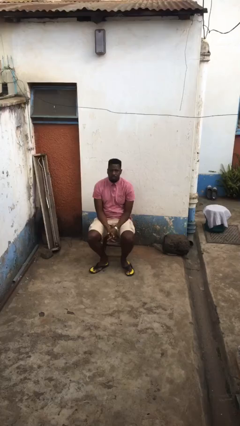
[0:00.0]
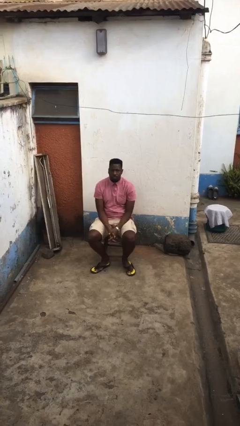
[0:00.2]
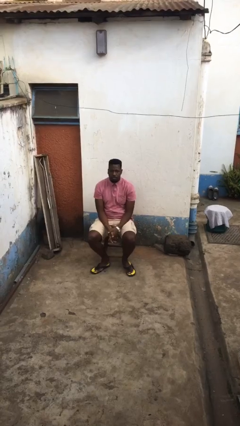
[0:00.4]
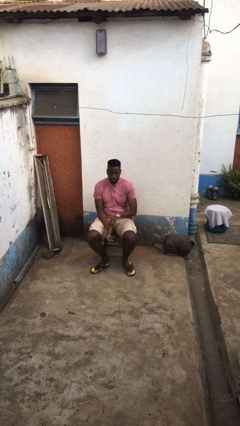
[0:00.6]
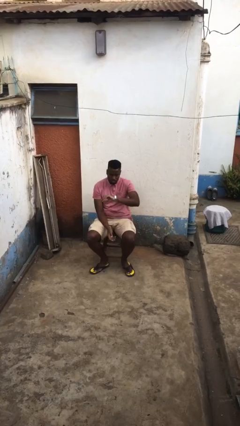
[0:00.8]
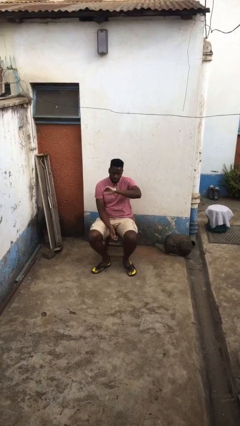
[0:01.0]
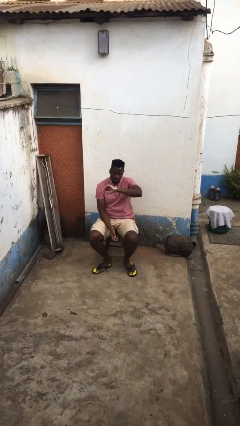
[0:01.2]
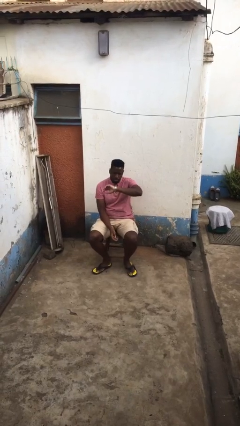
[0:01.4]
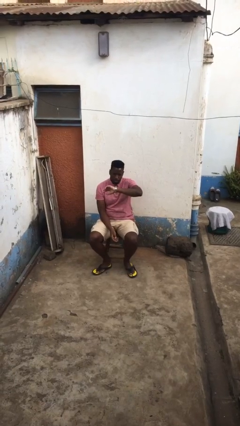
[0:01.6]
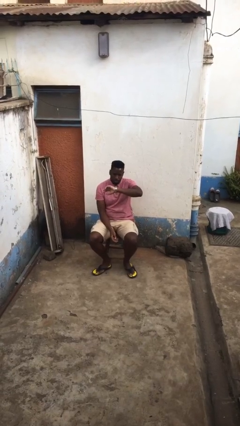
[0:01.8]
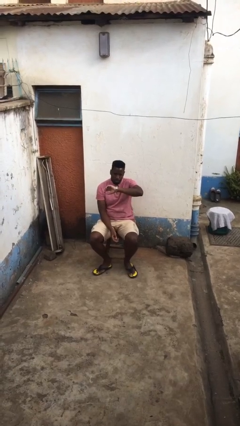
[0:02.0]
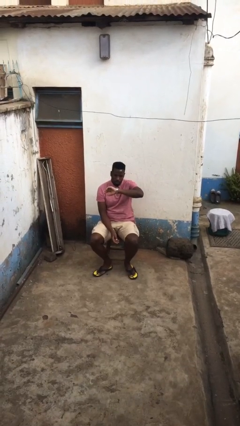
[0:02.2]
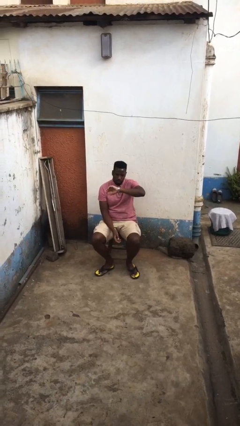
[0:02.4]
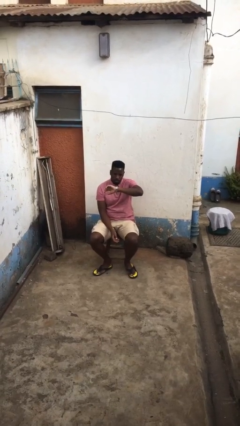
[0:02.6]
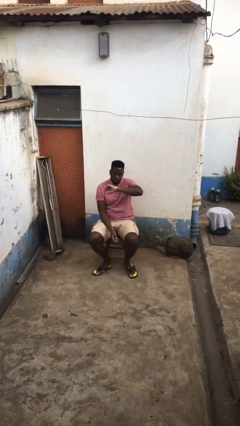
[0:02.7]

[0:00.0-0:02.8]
person looks at wristwatch

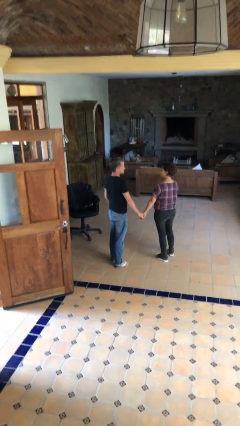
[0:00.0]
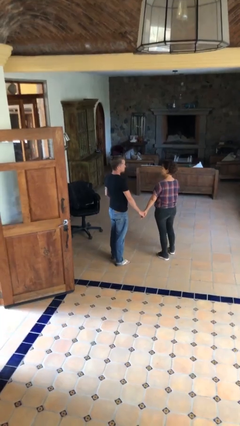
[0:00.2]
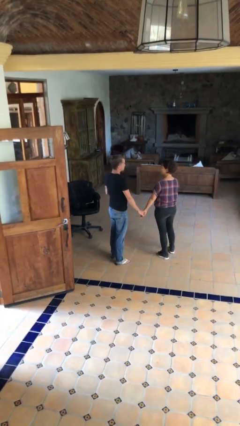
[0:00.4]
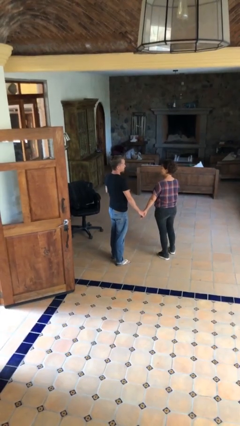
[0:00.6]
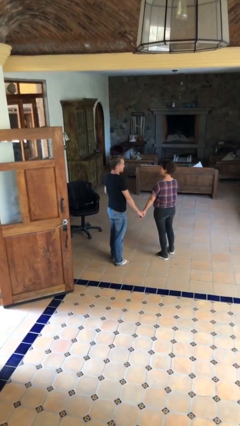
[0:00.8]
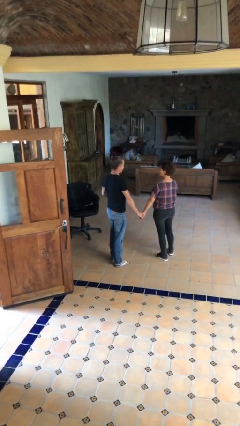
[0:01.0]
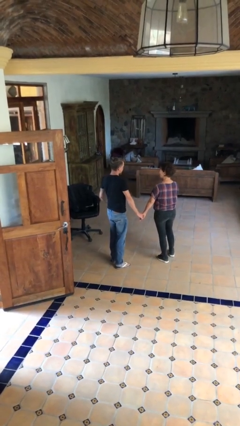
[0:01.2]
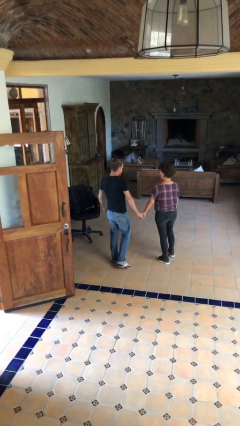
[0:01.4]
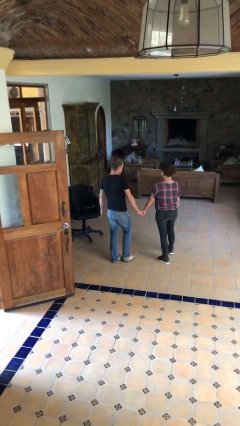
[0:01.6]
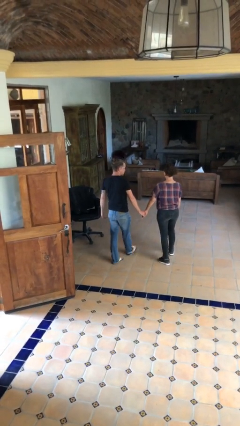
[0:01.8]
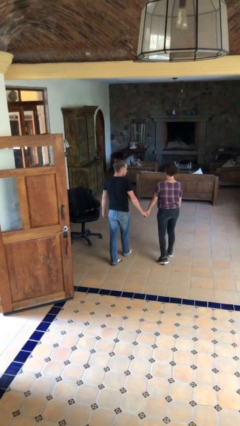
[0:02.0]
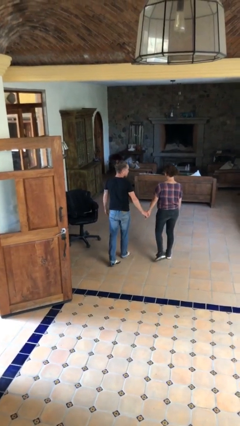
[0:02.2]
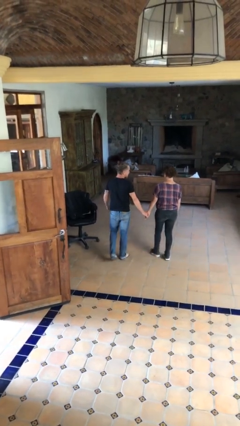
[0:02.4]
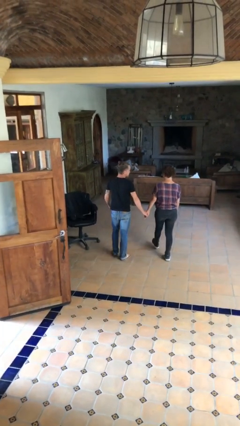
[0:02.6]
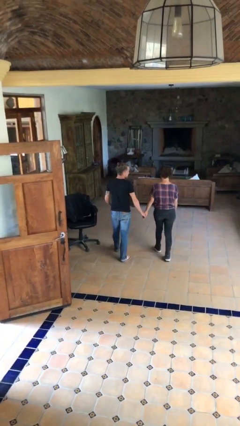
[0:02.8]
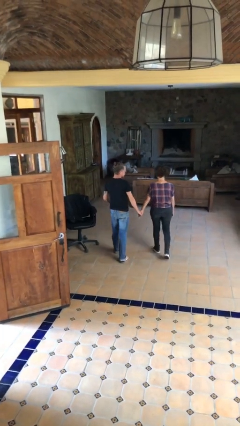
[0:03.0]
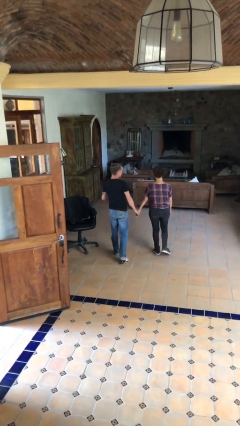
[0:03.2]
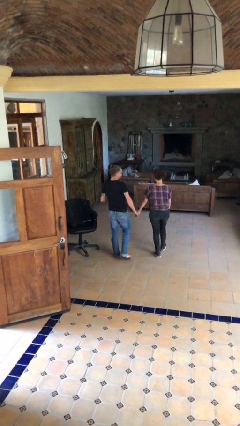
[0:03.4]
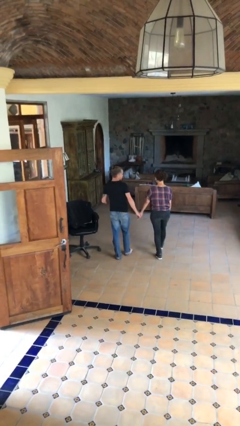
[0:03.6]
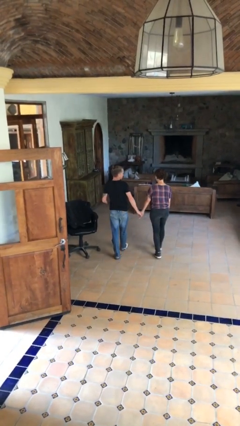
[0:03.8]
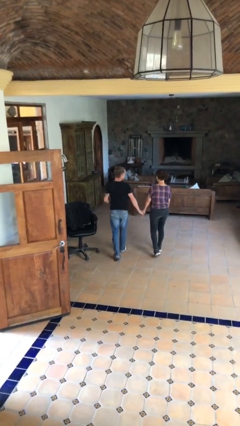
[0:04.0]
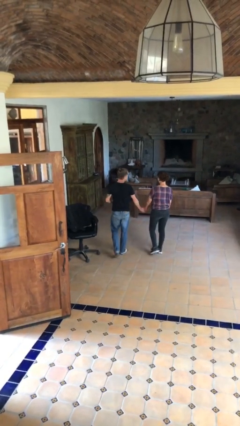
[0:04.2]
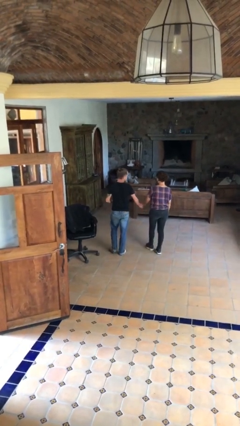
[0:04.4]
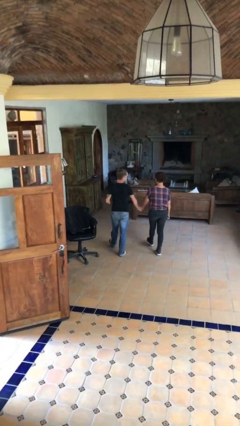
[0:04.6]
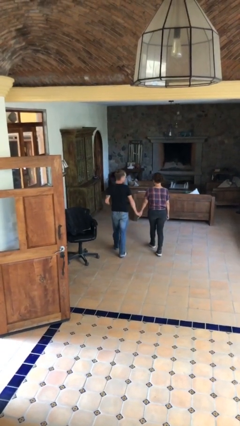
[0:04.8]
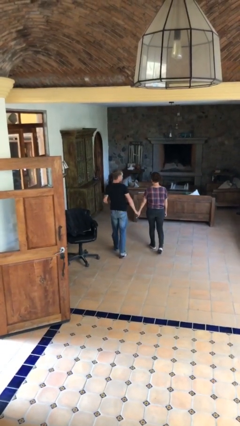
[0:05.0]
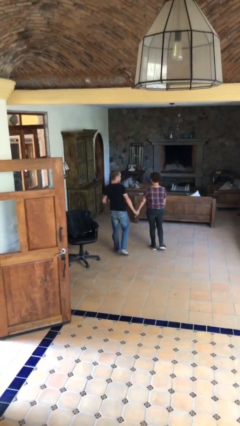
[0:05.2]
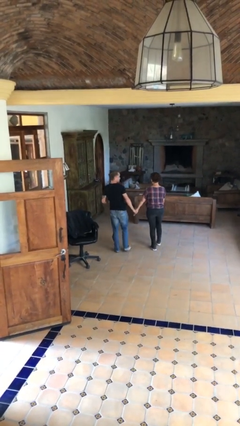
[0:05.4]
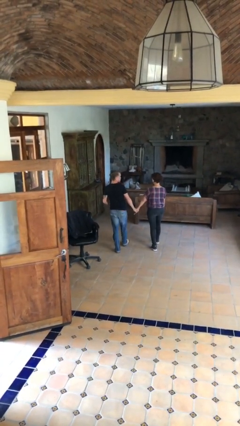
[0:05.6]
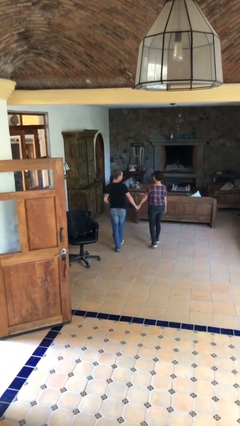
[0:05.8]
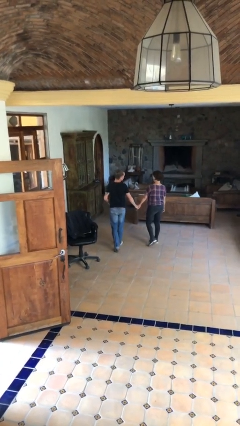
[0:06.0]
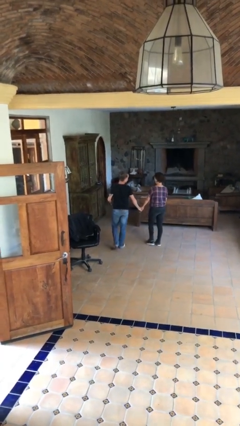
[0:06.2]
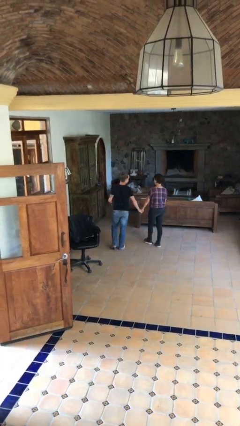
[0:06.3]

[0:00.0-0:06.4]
person holds hand

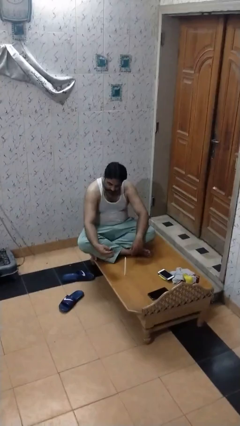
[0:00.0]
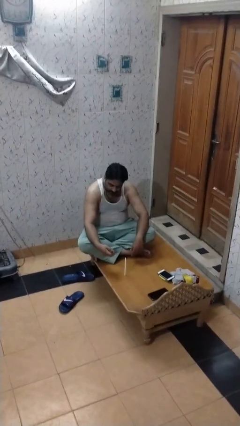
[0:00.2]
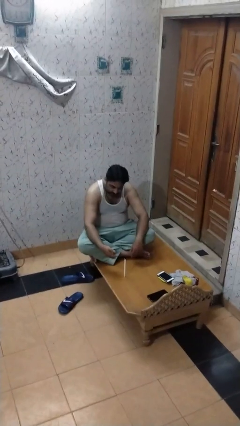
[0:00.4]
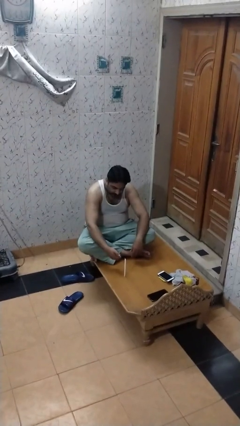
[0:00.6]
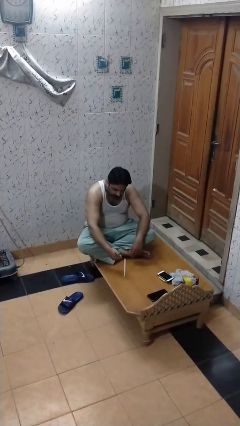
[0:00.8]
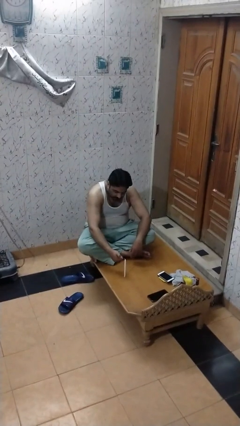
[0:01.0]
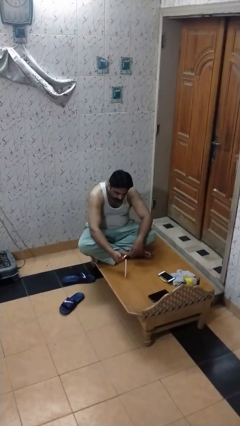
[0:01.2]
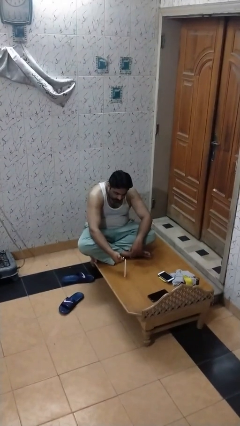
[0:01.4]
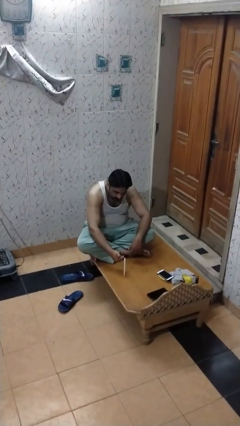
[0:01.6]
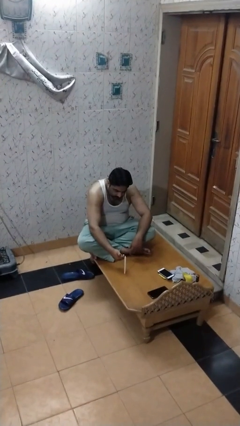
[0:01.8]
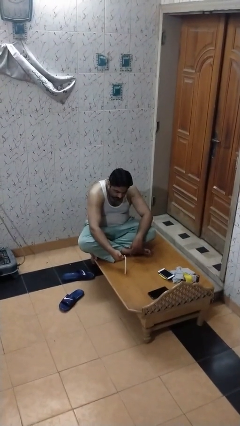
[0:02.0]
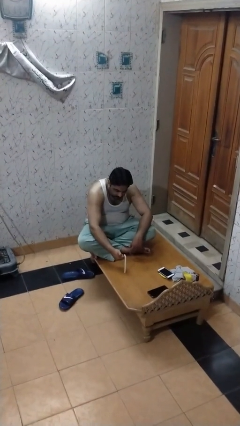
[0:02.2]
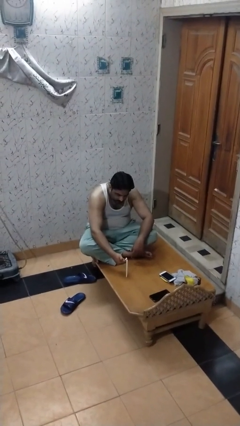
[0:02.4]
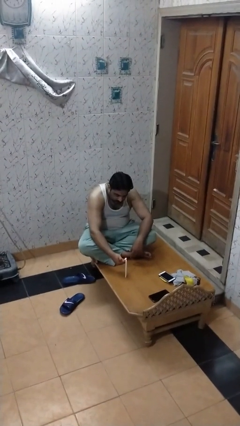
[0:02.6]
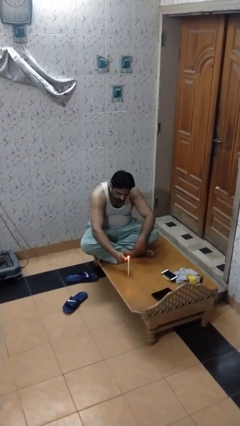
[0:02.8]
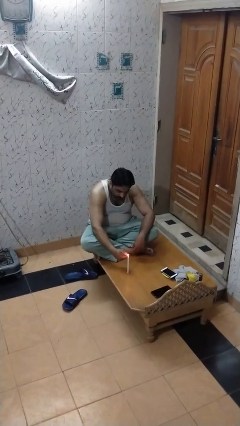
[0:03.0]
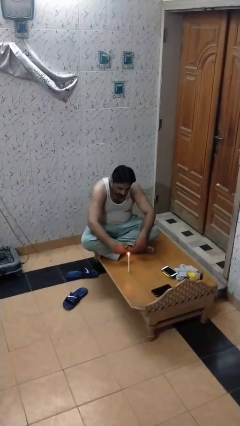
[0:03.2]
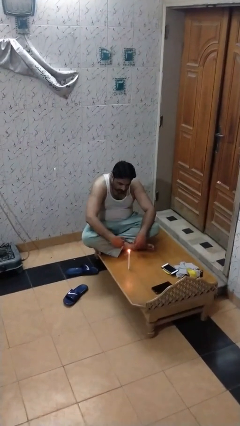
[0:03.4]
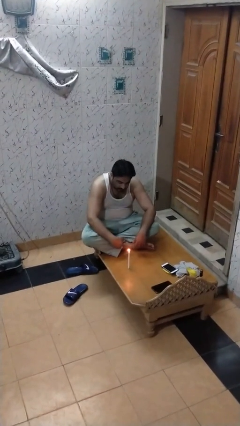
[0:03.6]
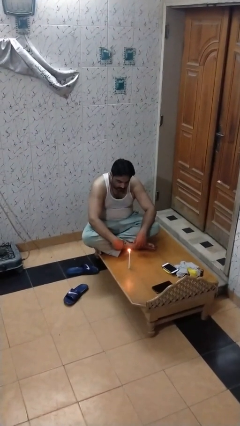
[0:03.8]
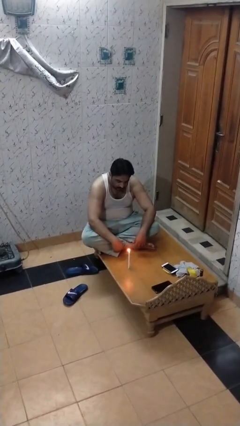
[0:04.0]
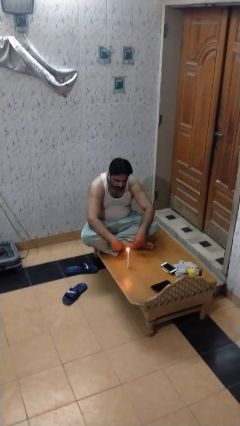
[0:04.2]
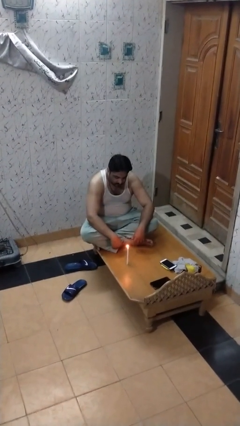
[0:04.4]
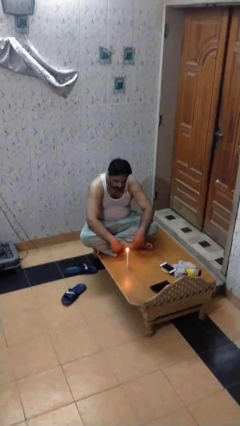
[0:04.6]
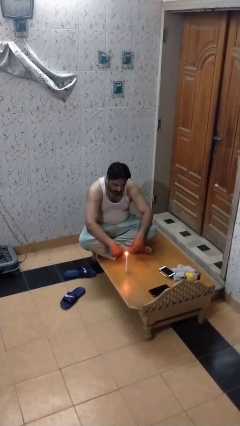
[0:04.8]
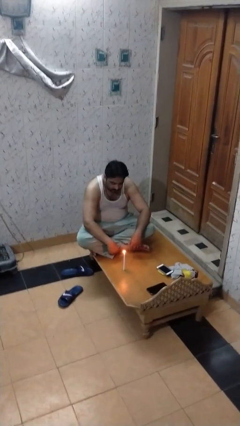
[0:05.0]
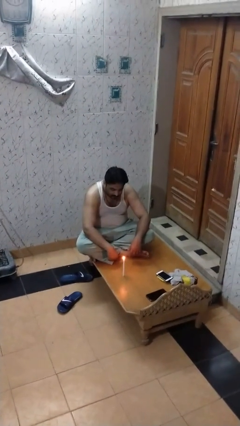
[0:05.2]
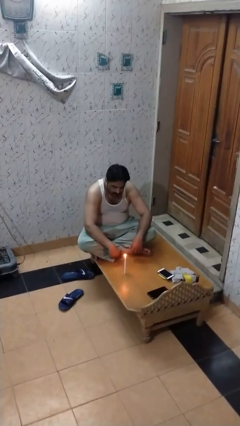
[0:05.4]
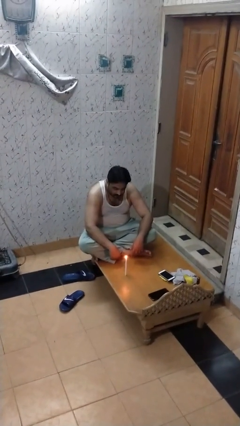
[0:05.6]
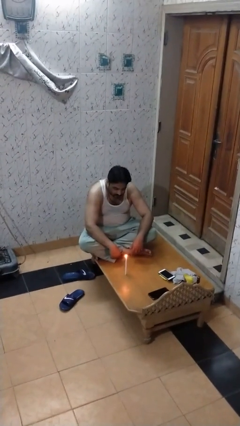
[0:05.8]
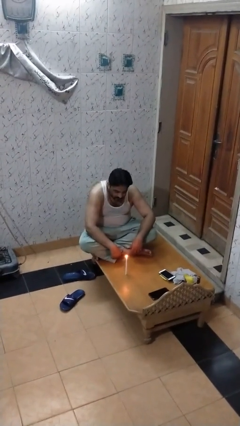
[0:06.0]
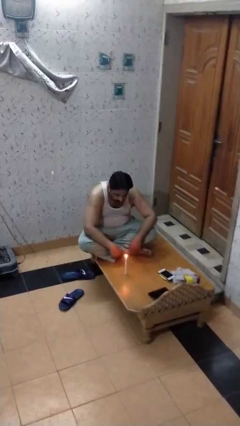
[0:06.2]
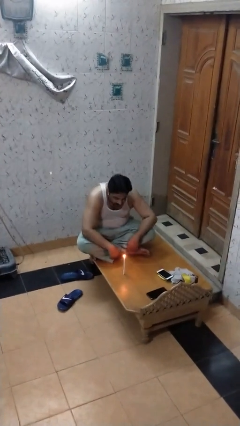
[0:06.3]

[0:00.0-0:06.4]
person lights candle

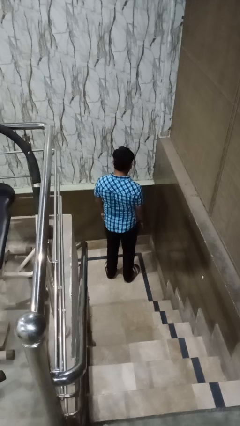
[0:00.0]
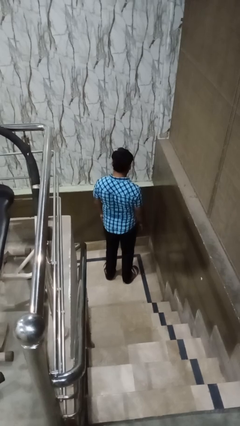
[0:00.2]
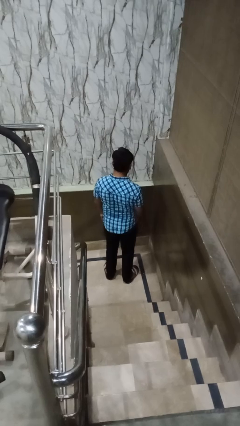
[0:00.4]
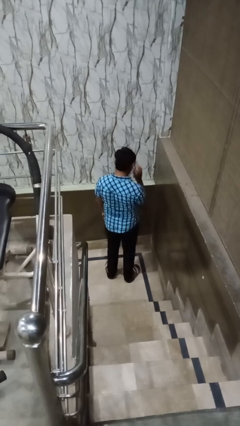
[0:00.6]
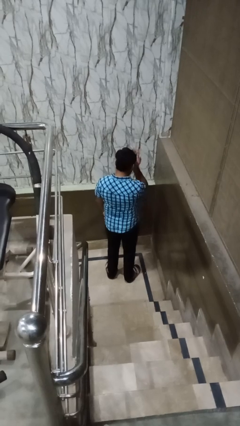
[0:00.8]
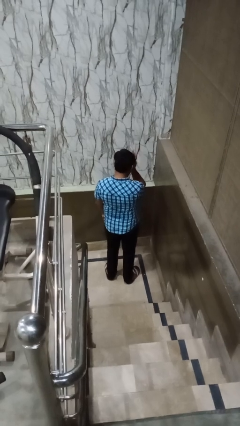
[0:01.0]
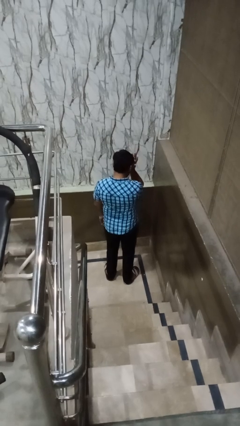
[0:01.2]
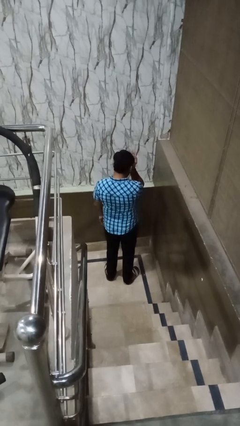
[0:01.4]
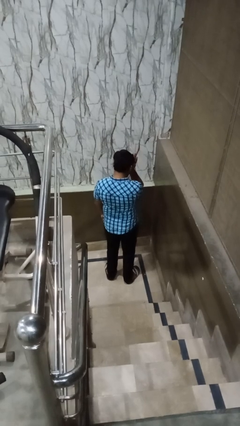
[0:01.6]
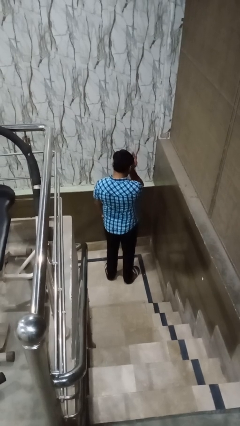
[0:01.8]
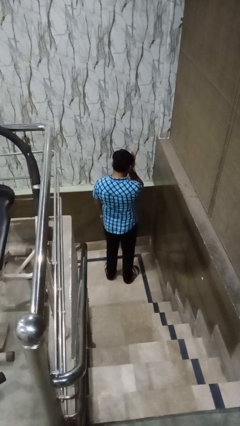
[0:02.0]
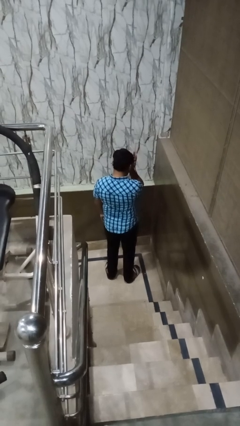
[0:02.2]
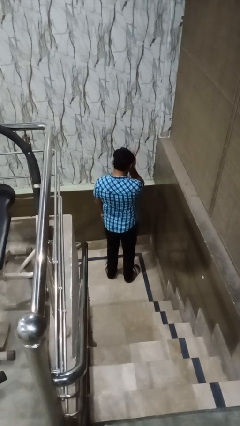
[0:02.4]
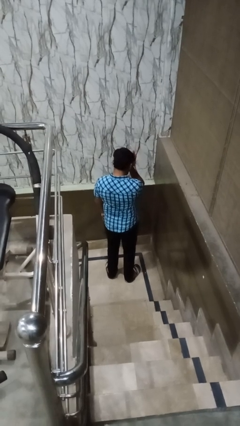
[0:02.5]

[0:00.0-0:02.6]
person shades eyes
